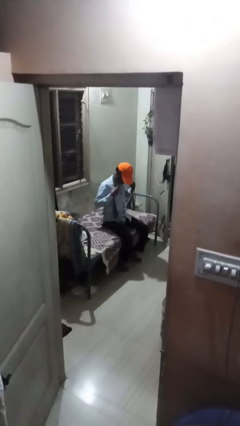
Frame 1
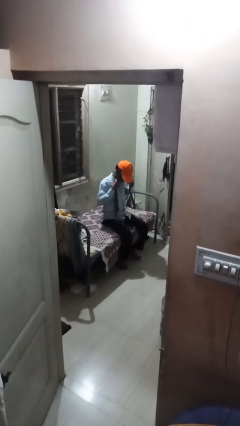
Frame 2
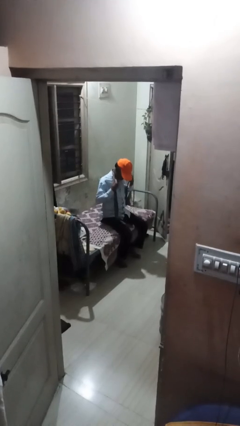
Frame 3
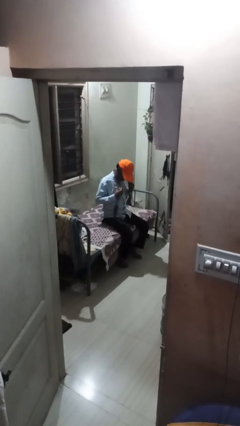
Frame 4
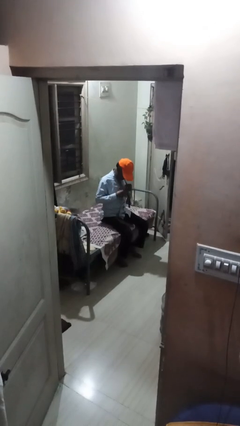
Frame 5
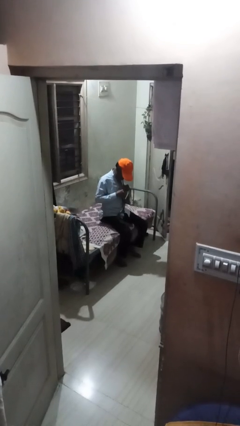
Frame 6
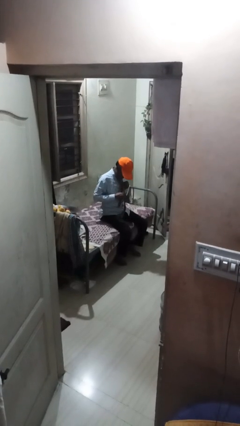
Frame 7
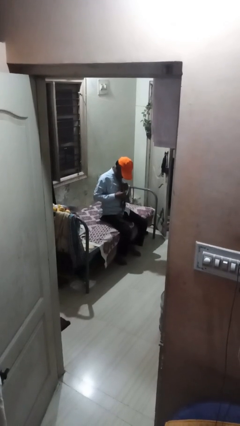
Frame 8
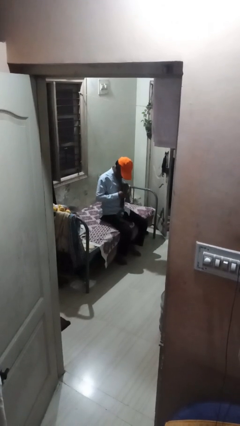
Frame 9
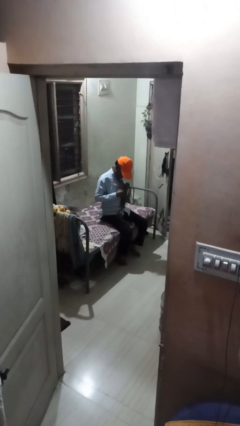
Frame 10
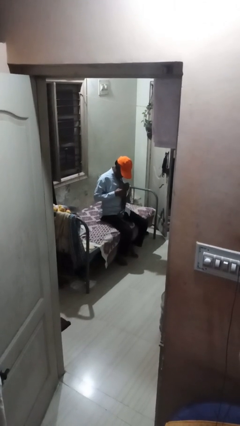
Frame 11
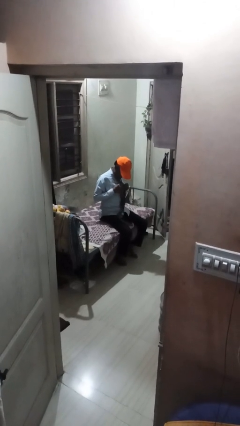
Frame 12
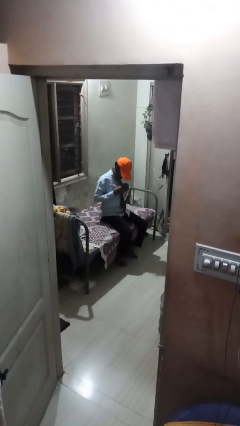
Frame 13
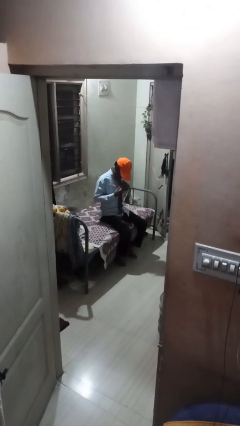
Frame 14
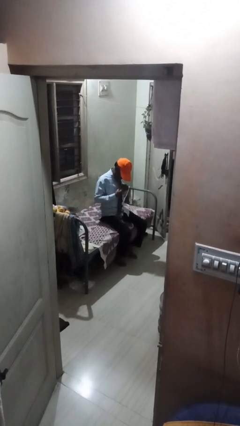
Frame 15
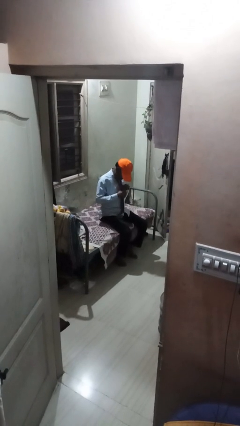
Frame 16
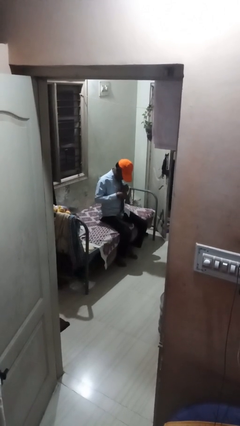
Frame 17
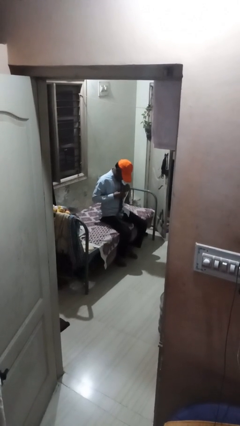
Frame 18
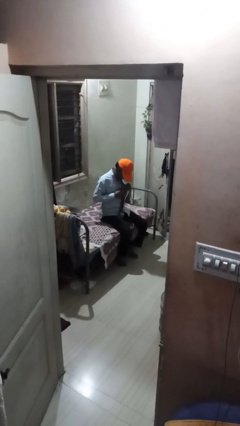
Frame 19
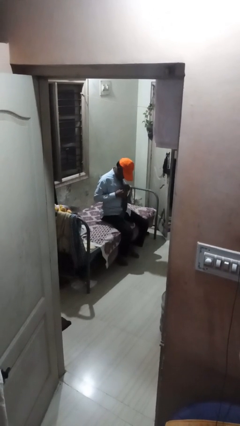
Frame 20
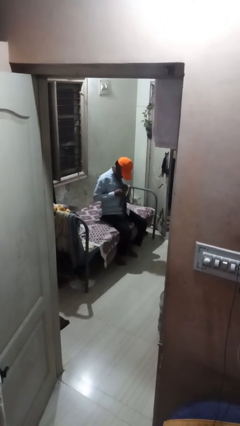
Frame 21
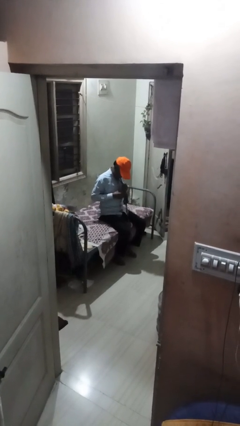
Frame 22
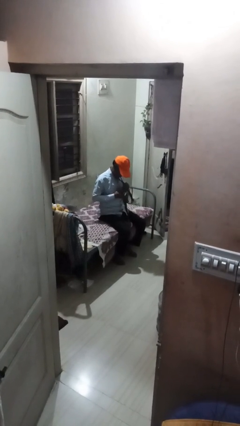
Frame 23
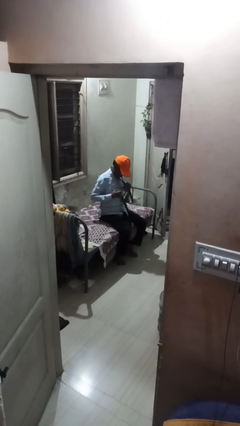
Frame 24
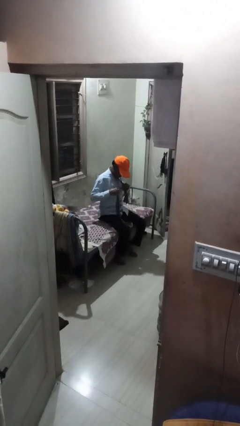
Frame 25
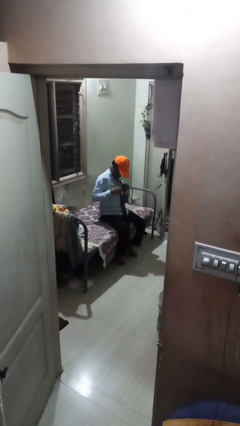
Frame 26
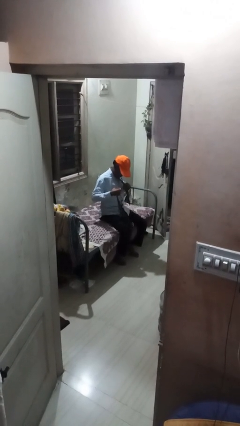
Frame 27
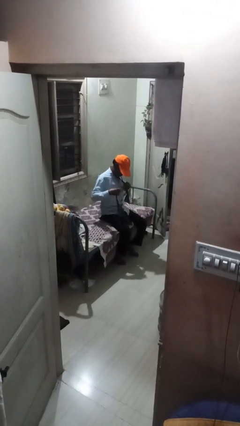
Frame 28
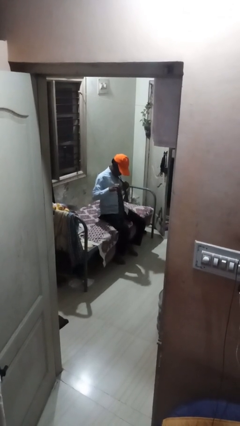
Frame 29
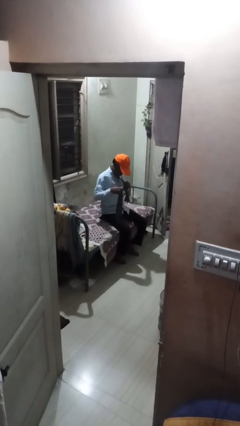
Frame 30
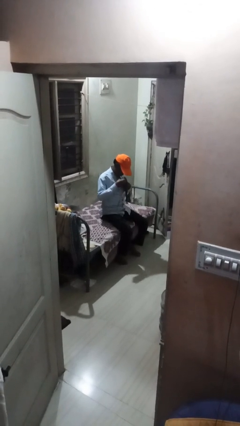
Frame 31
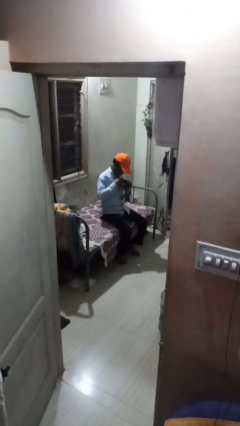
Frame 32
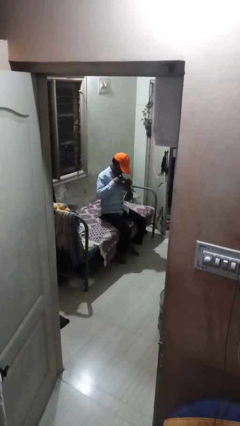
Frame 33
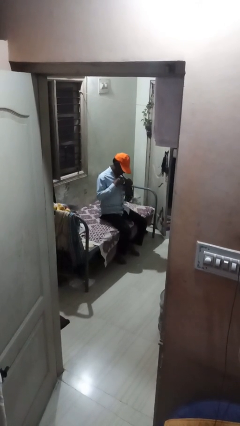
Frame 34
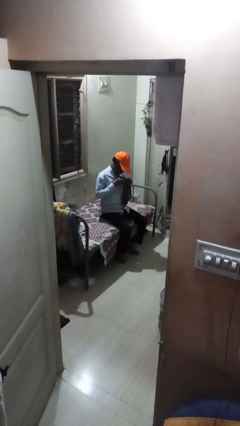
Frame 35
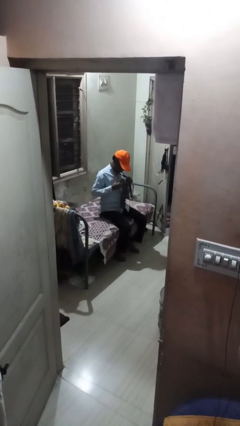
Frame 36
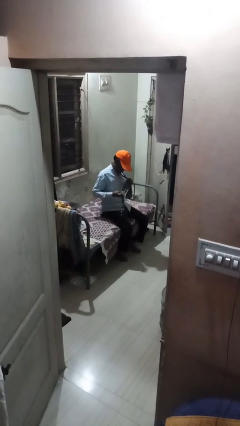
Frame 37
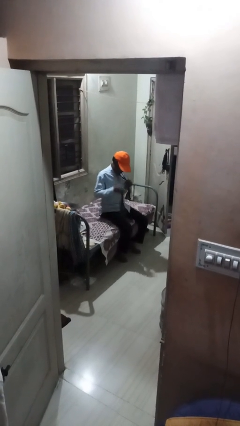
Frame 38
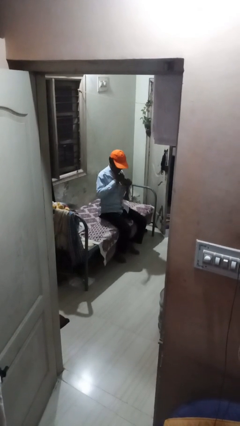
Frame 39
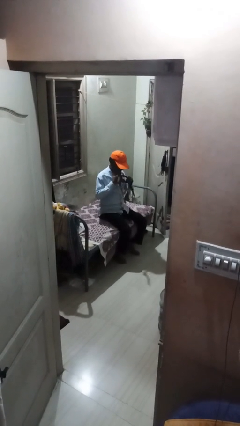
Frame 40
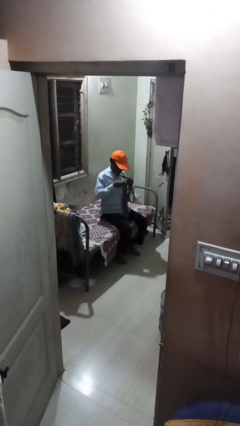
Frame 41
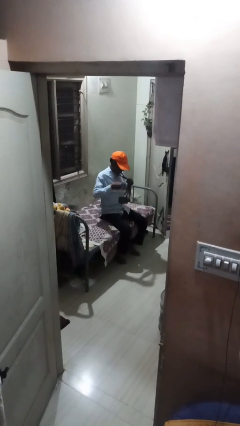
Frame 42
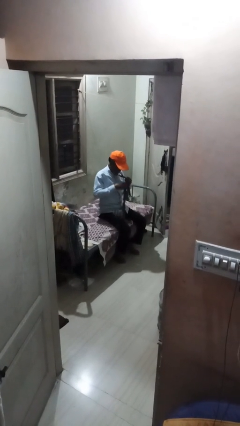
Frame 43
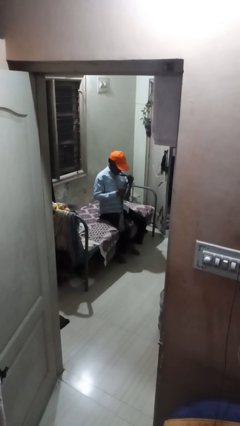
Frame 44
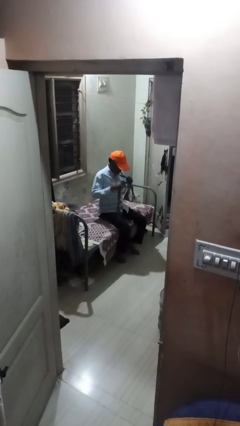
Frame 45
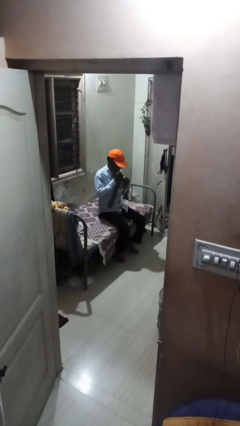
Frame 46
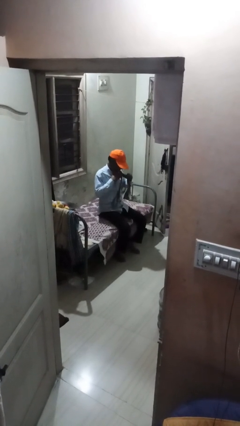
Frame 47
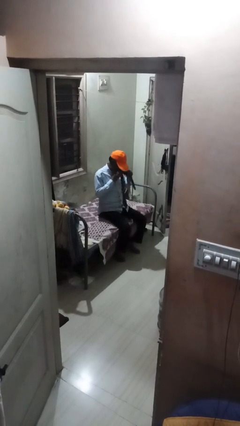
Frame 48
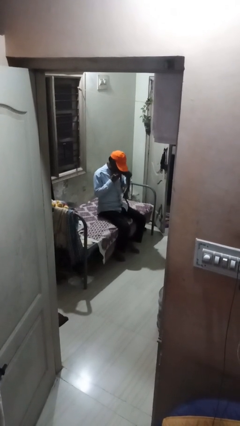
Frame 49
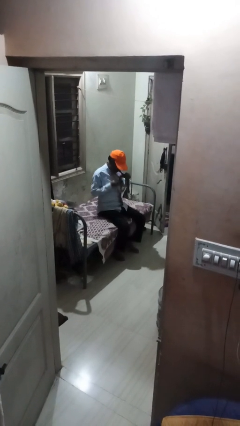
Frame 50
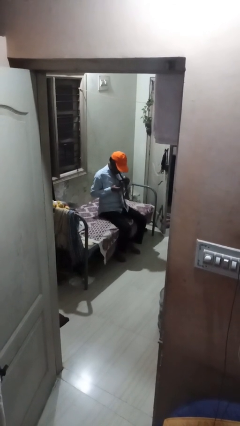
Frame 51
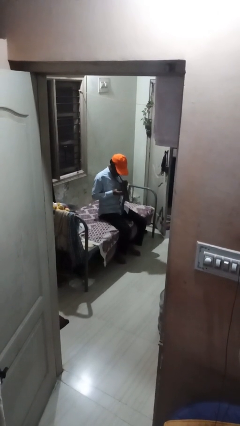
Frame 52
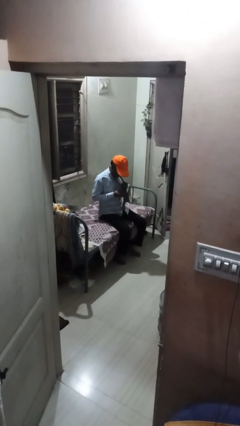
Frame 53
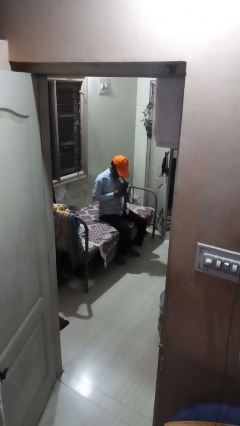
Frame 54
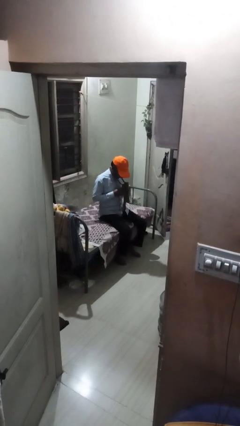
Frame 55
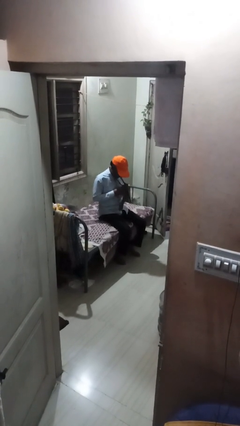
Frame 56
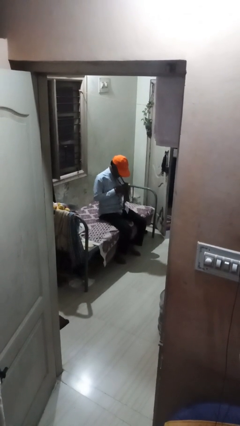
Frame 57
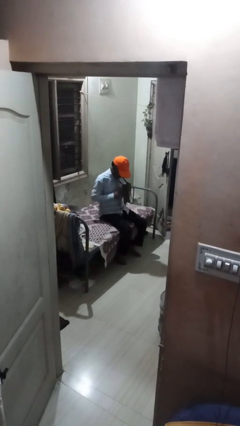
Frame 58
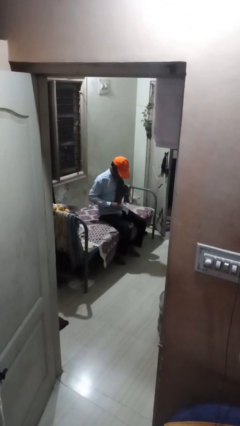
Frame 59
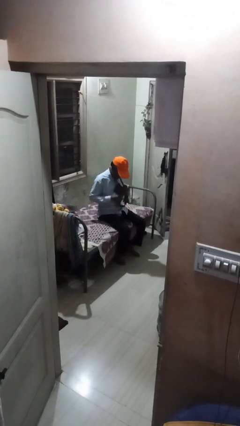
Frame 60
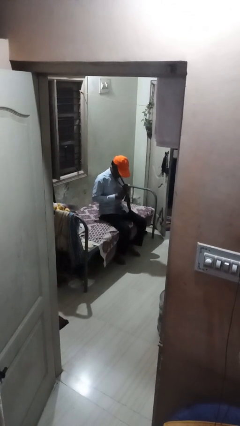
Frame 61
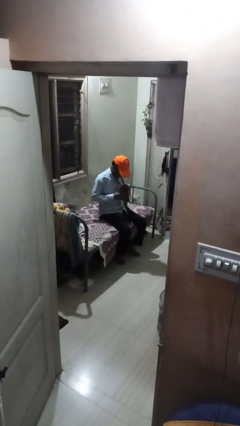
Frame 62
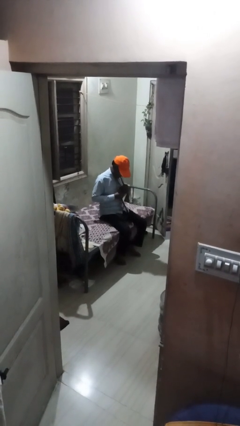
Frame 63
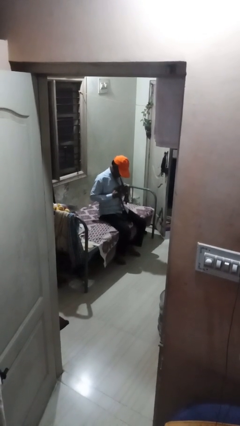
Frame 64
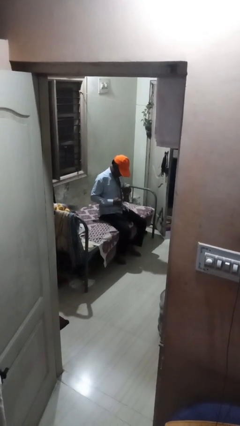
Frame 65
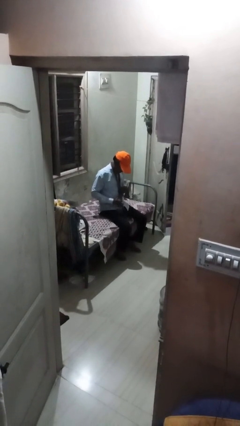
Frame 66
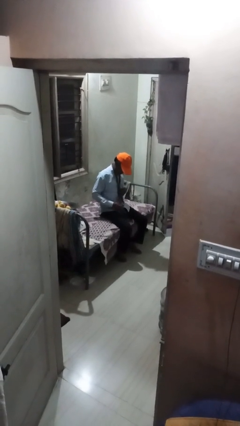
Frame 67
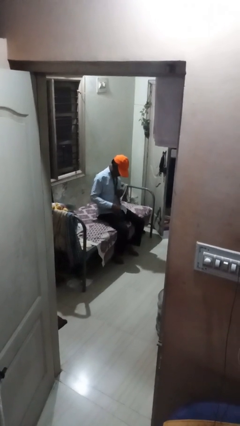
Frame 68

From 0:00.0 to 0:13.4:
person puts on necktie

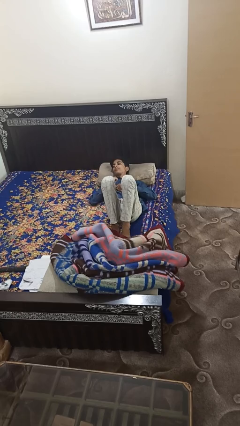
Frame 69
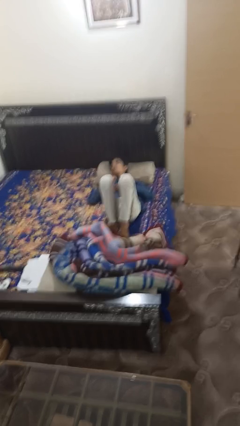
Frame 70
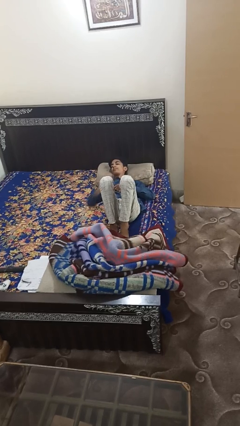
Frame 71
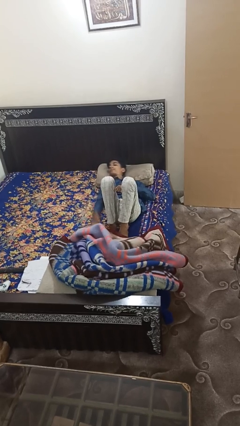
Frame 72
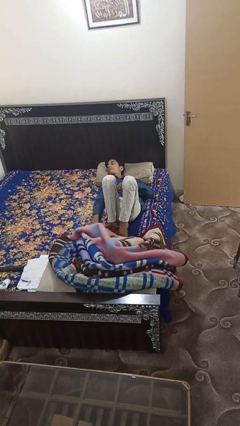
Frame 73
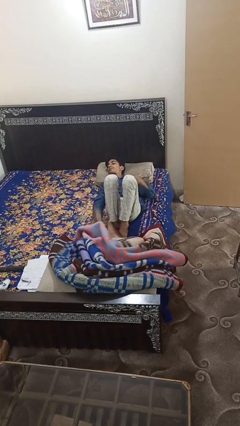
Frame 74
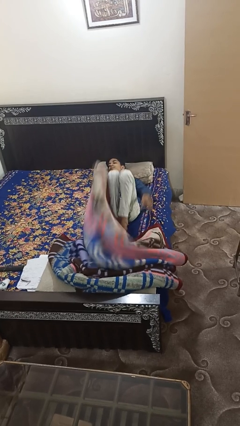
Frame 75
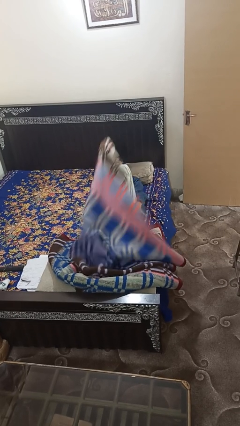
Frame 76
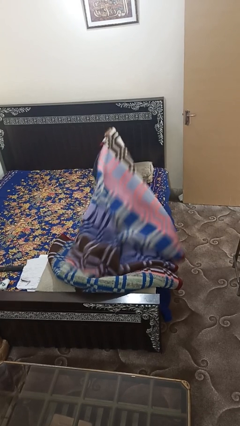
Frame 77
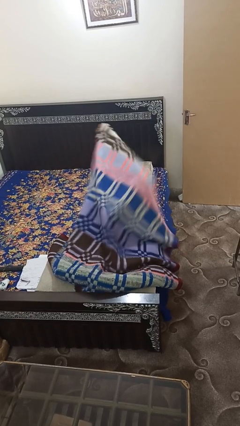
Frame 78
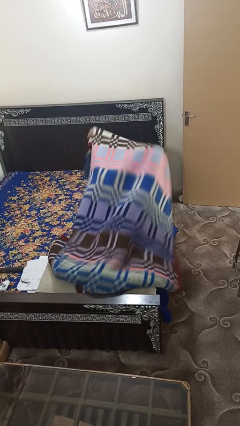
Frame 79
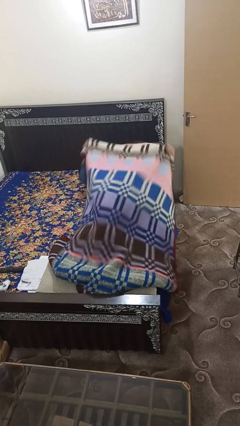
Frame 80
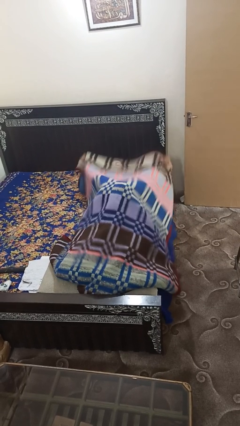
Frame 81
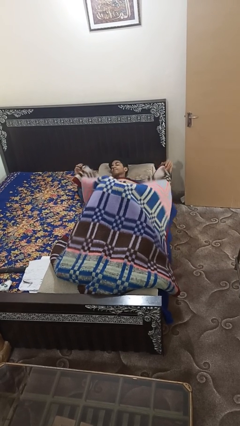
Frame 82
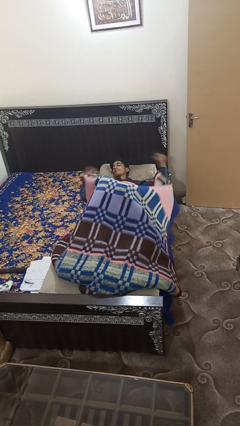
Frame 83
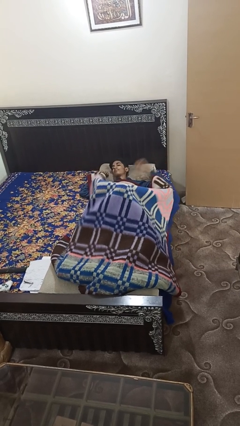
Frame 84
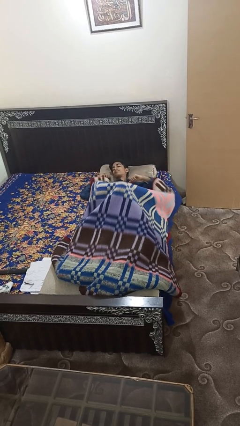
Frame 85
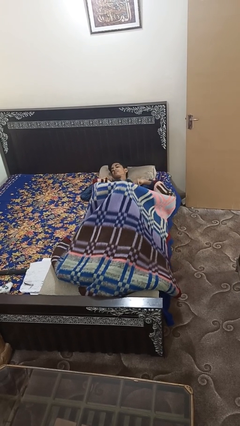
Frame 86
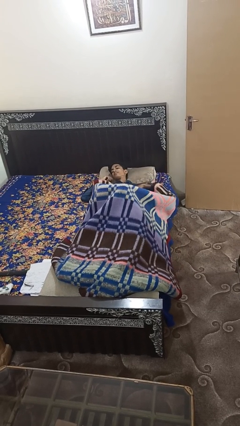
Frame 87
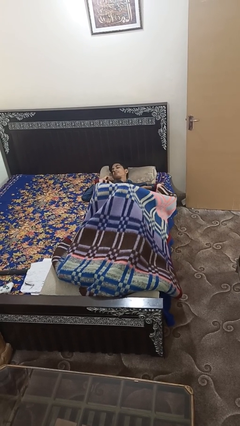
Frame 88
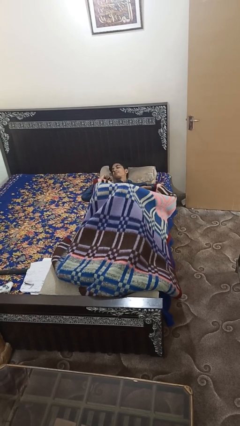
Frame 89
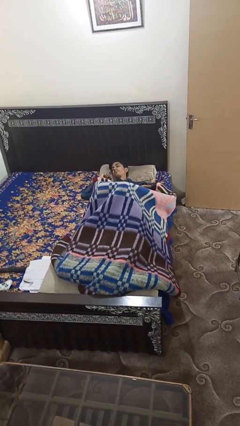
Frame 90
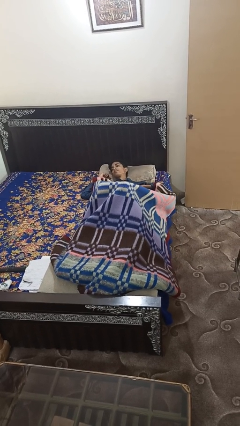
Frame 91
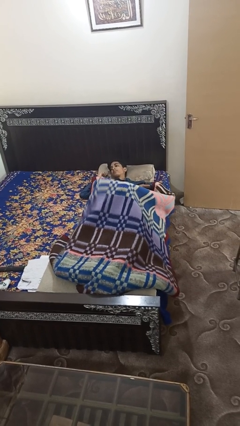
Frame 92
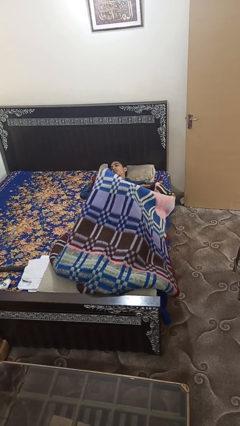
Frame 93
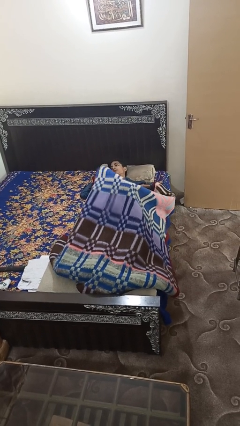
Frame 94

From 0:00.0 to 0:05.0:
person covers with bedsheets
